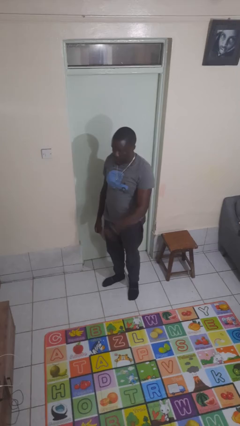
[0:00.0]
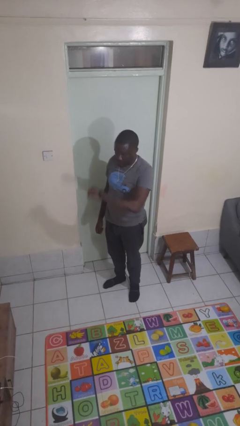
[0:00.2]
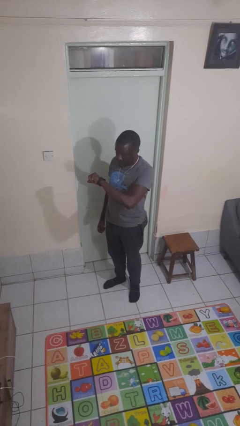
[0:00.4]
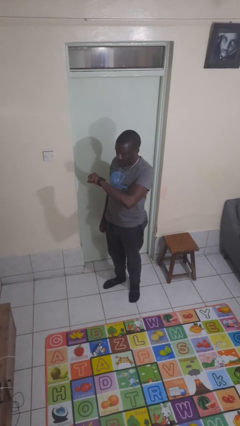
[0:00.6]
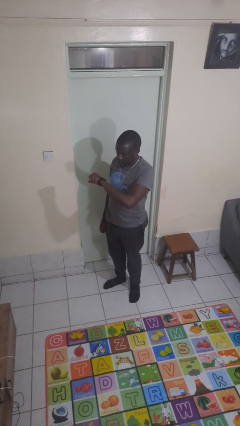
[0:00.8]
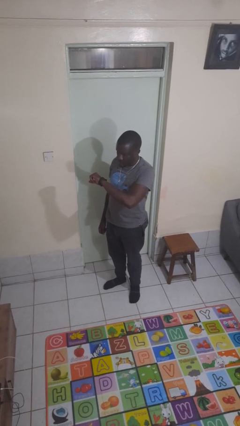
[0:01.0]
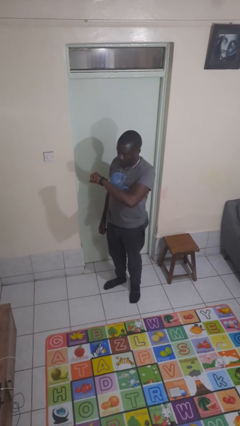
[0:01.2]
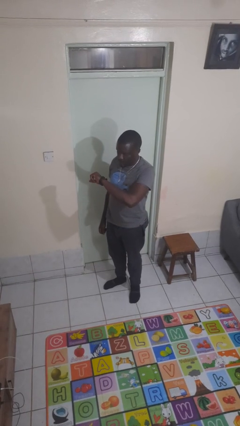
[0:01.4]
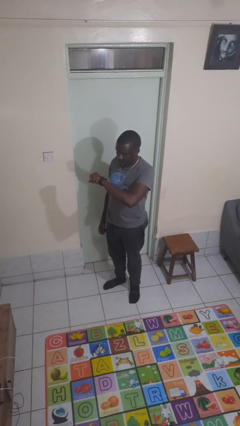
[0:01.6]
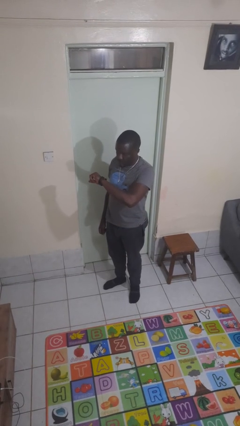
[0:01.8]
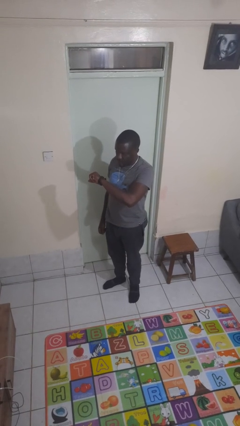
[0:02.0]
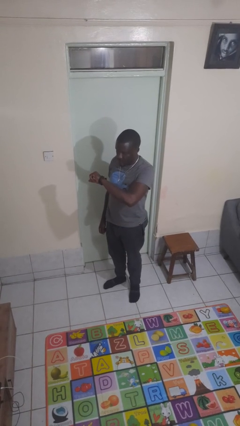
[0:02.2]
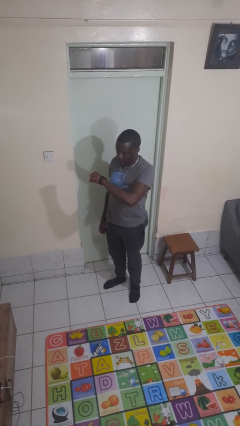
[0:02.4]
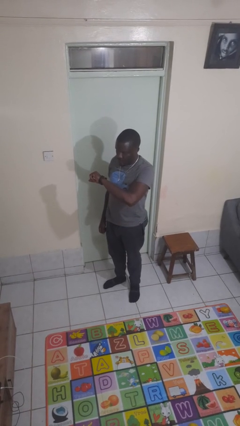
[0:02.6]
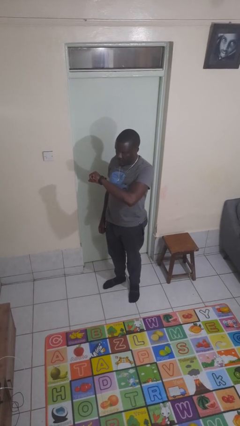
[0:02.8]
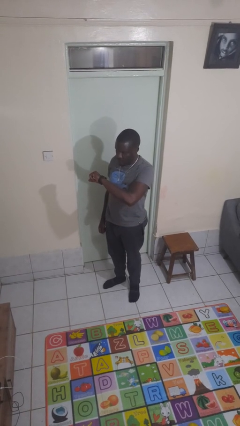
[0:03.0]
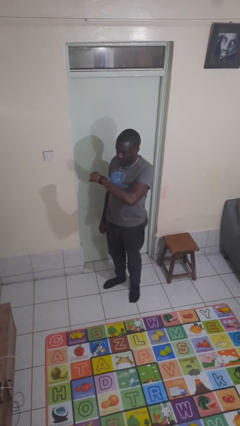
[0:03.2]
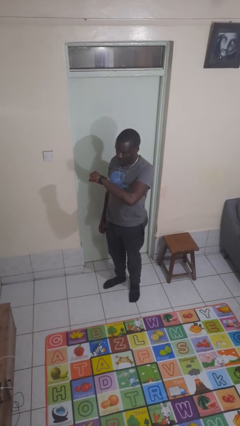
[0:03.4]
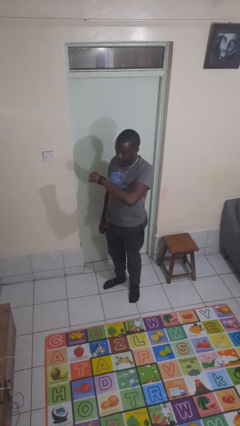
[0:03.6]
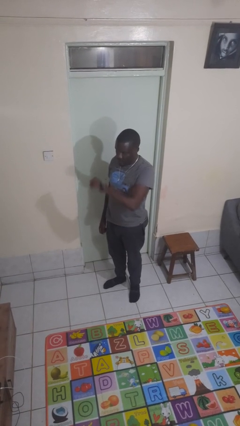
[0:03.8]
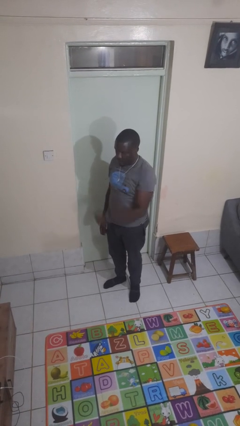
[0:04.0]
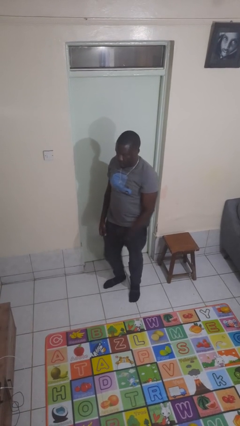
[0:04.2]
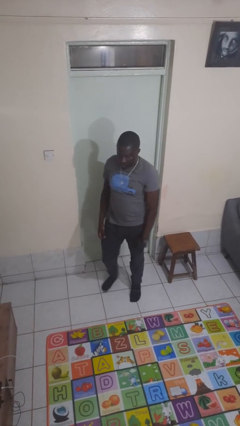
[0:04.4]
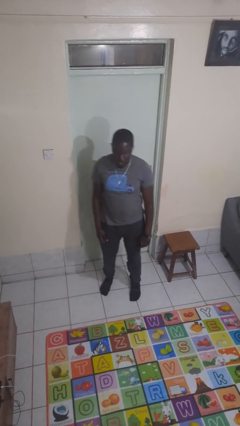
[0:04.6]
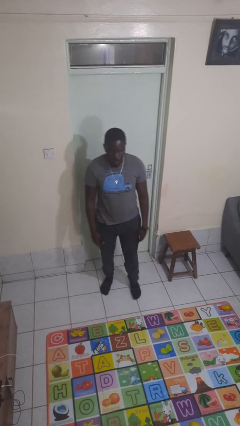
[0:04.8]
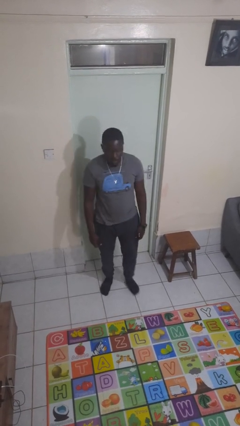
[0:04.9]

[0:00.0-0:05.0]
person looks at wristwatch

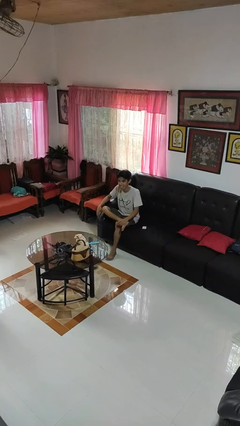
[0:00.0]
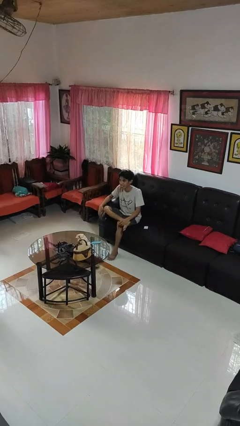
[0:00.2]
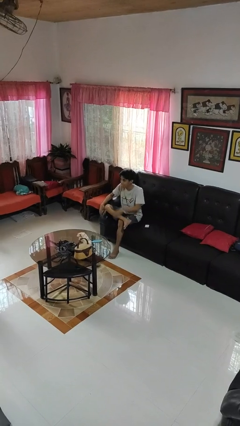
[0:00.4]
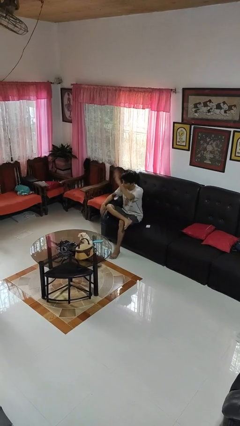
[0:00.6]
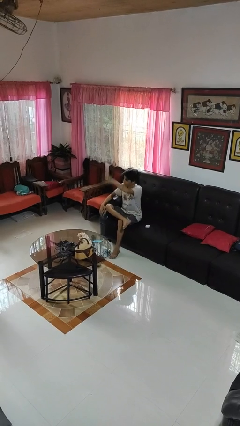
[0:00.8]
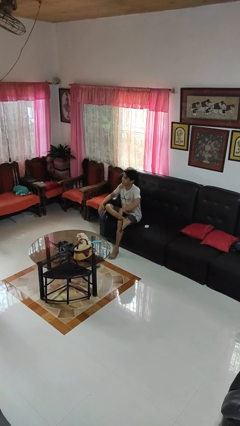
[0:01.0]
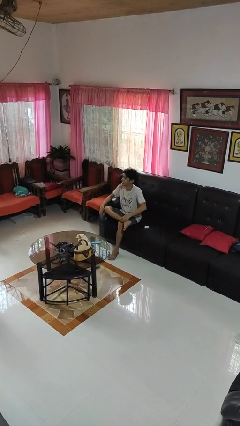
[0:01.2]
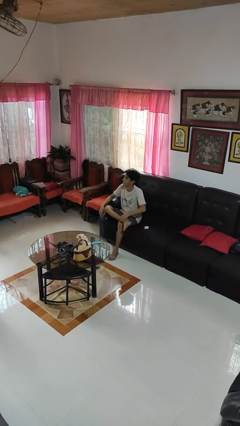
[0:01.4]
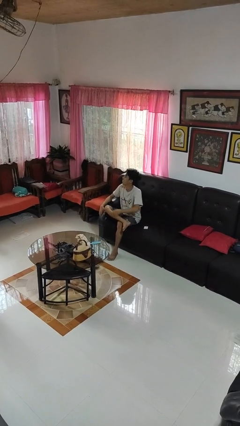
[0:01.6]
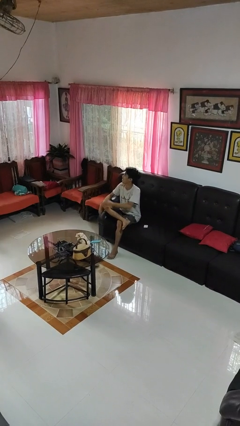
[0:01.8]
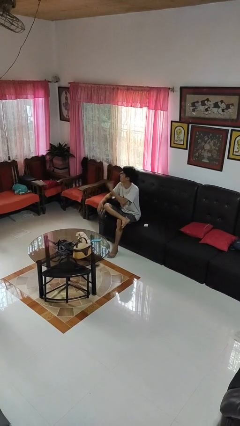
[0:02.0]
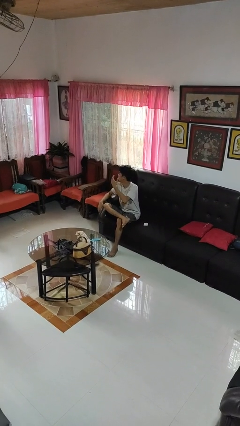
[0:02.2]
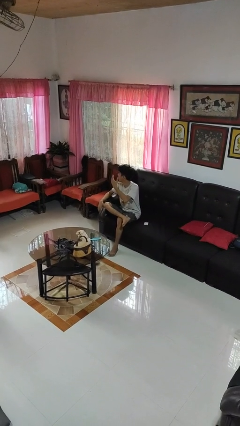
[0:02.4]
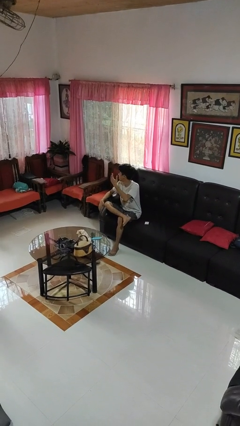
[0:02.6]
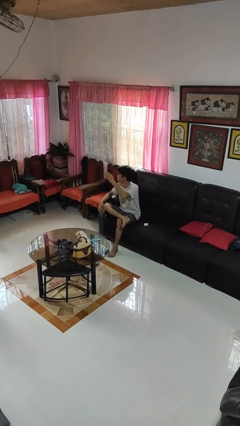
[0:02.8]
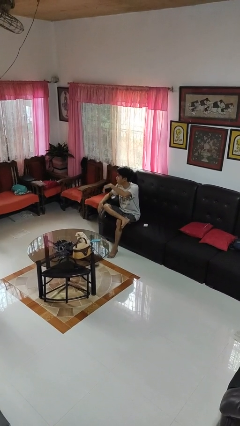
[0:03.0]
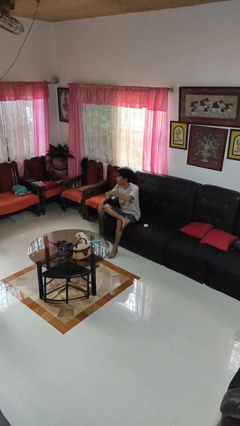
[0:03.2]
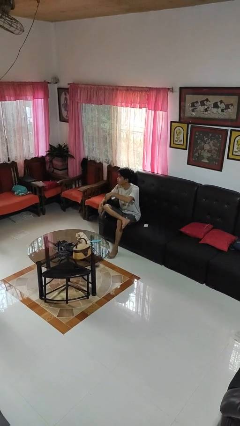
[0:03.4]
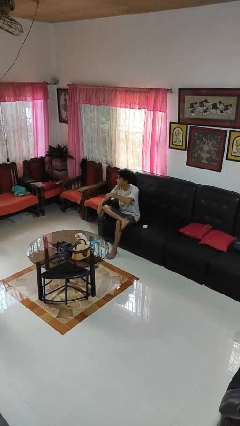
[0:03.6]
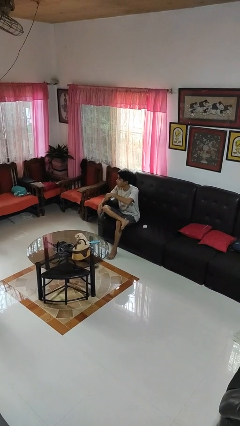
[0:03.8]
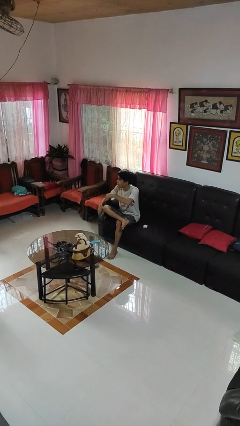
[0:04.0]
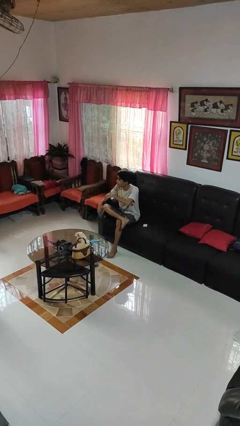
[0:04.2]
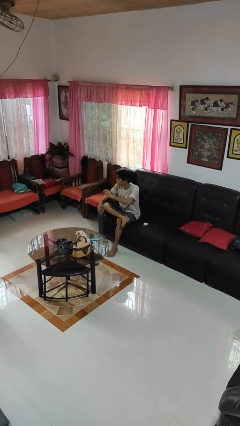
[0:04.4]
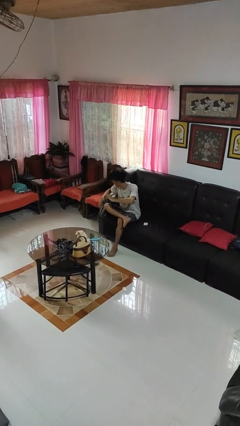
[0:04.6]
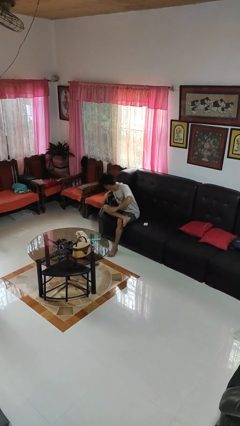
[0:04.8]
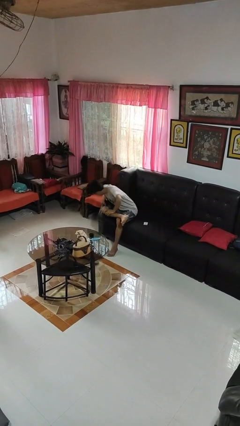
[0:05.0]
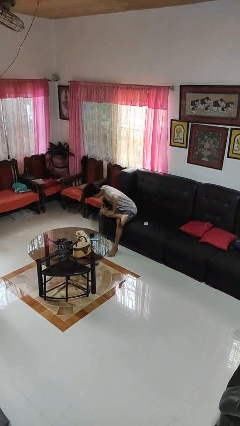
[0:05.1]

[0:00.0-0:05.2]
person gestures come here

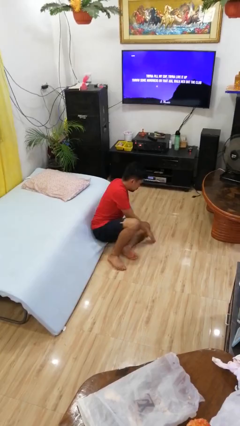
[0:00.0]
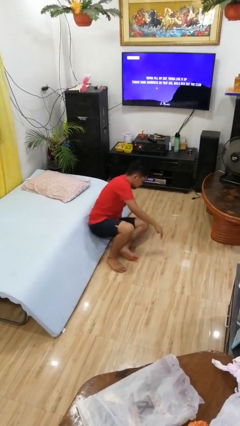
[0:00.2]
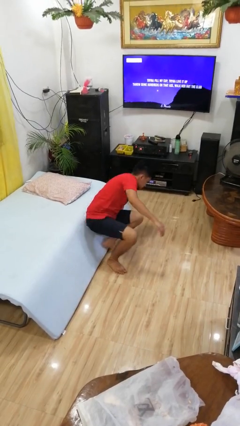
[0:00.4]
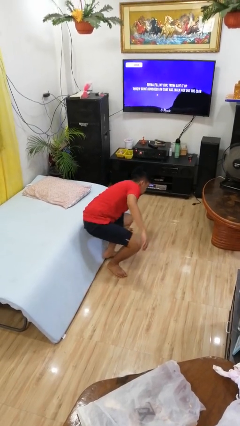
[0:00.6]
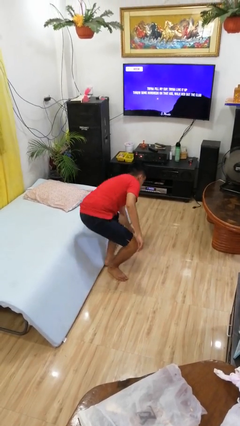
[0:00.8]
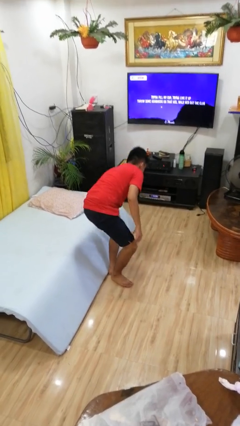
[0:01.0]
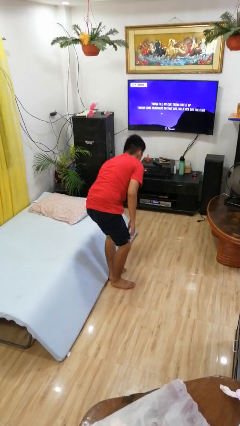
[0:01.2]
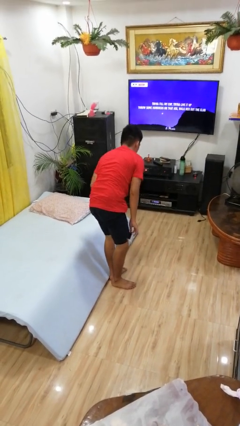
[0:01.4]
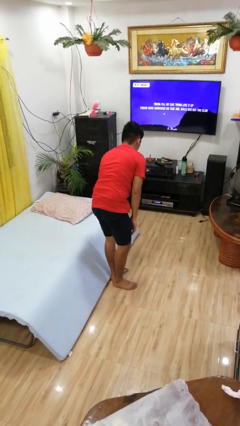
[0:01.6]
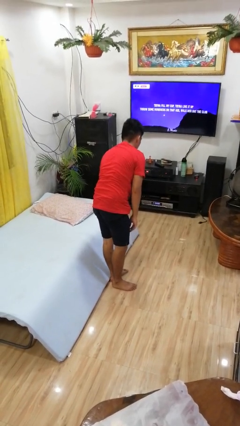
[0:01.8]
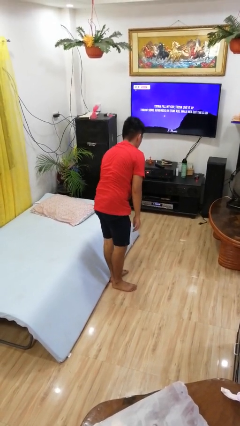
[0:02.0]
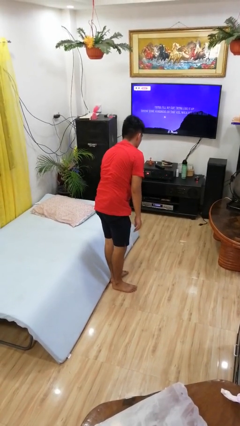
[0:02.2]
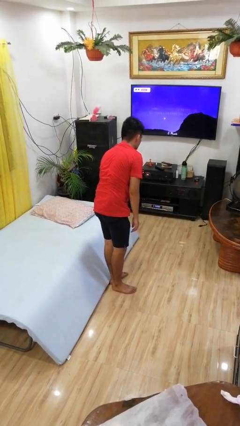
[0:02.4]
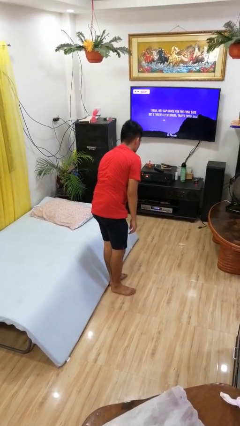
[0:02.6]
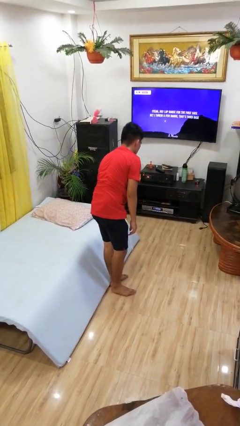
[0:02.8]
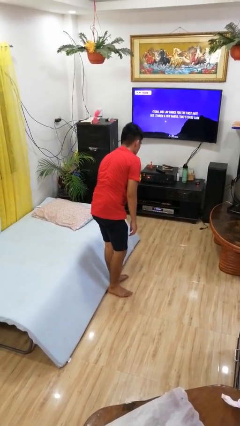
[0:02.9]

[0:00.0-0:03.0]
person stands up from floor

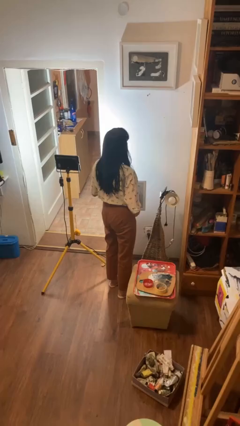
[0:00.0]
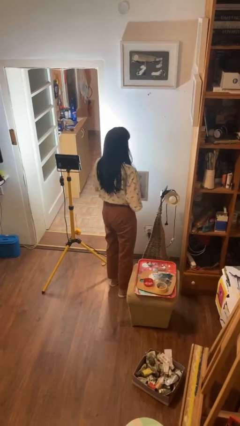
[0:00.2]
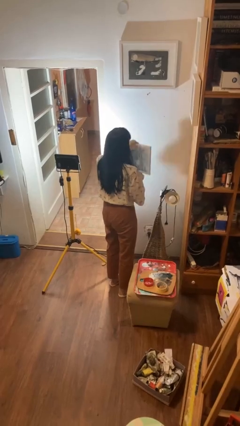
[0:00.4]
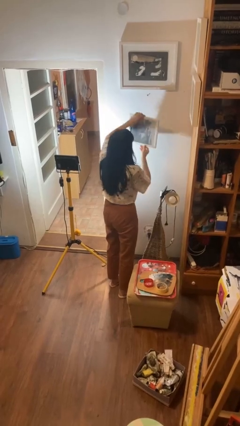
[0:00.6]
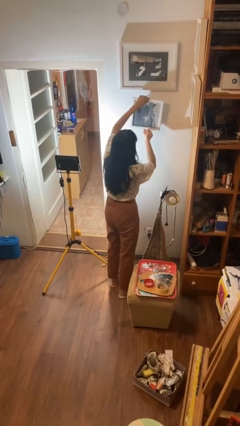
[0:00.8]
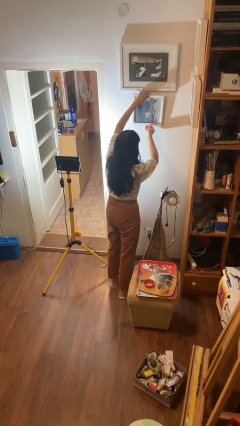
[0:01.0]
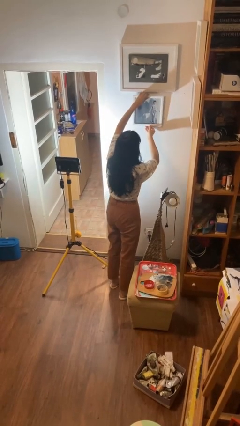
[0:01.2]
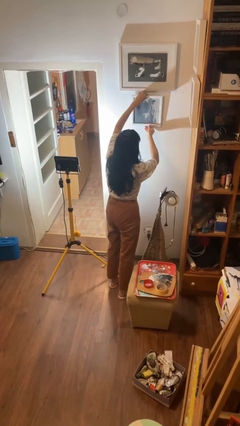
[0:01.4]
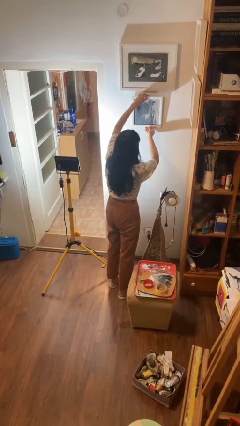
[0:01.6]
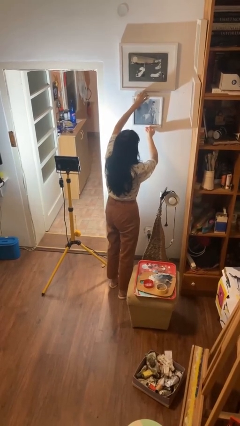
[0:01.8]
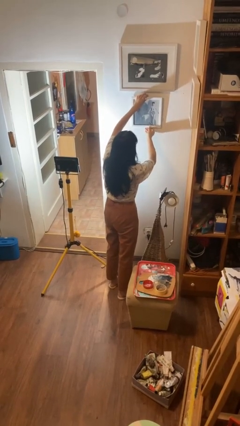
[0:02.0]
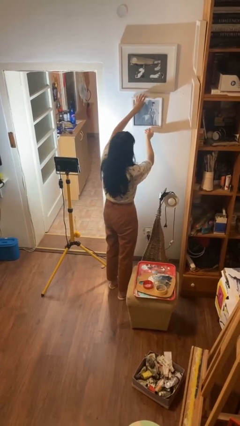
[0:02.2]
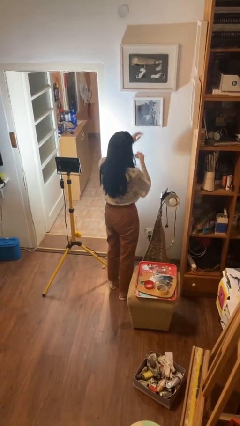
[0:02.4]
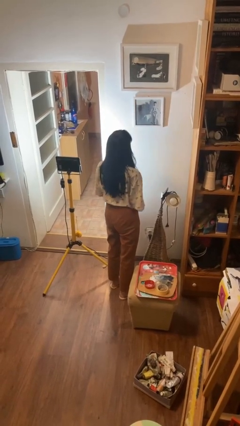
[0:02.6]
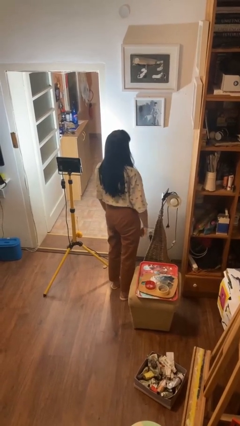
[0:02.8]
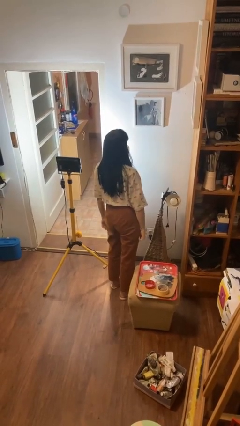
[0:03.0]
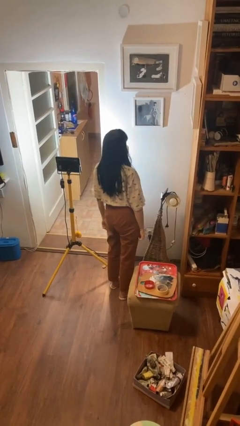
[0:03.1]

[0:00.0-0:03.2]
person puts up picture frame

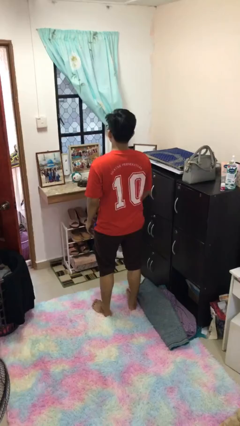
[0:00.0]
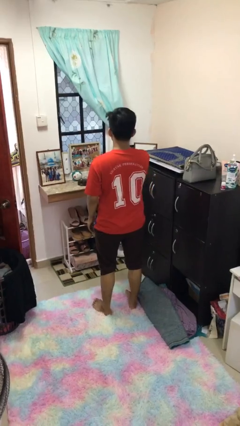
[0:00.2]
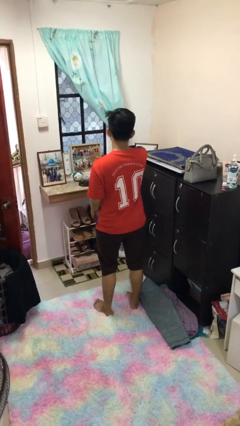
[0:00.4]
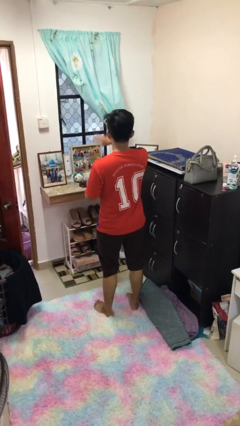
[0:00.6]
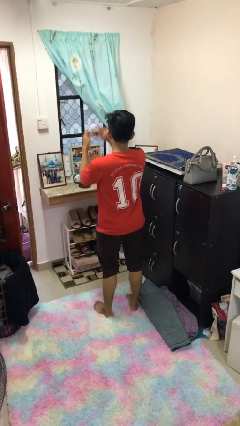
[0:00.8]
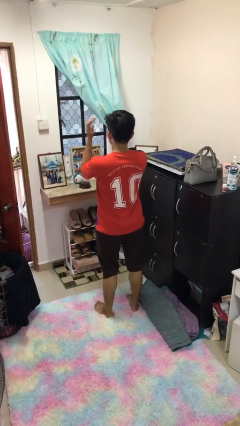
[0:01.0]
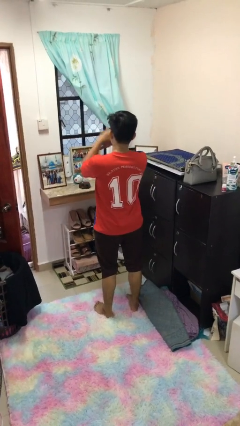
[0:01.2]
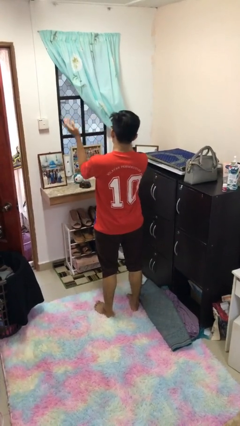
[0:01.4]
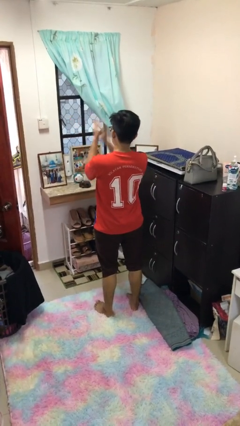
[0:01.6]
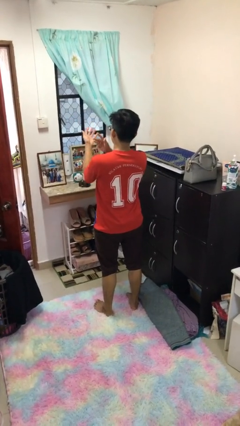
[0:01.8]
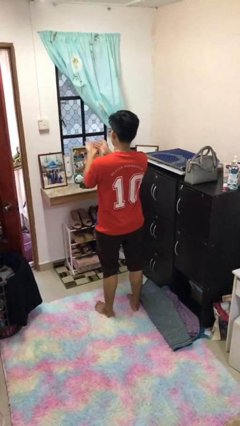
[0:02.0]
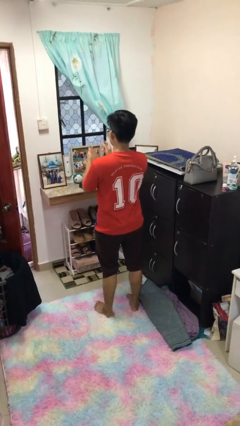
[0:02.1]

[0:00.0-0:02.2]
person swats bug
